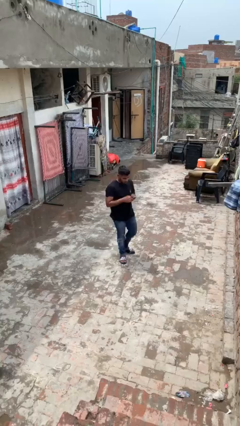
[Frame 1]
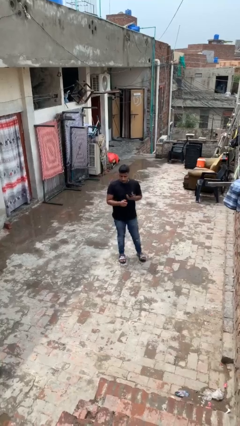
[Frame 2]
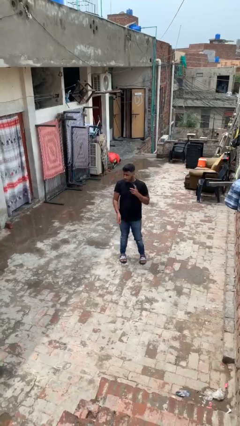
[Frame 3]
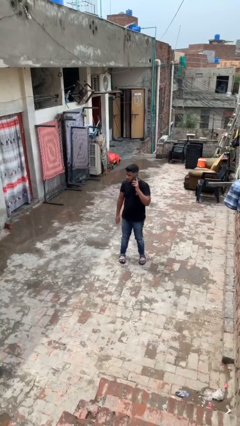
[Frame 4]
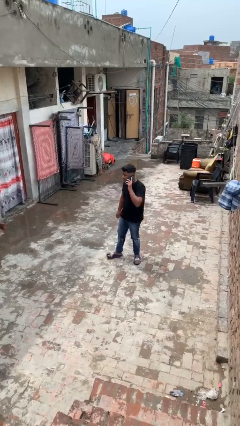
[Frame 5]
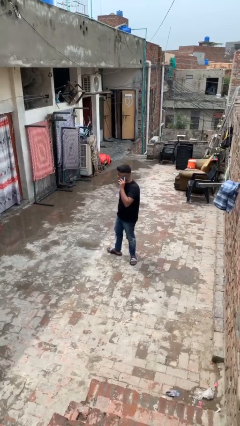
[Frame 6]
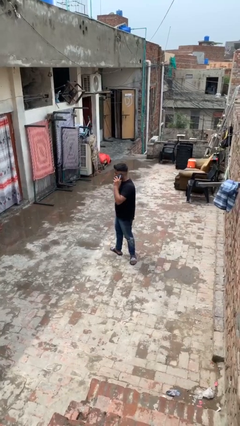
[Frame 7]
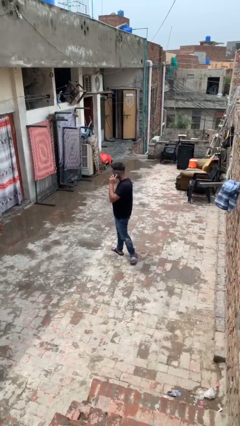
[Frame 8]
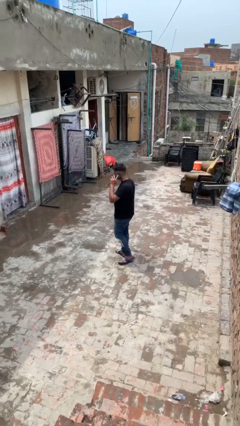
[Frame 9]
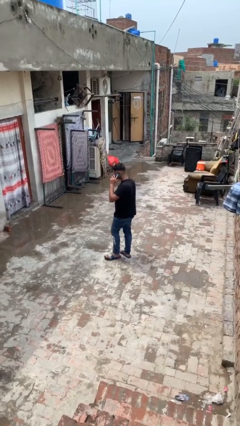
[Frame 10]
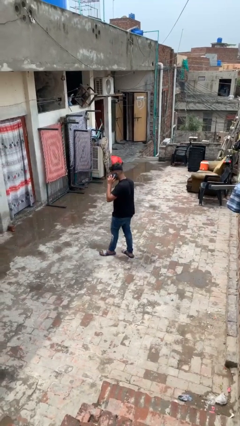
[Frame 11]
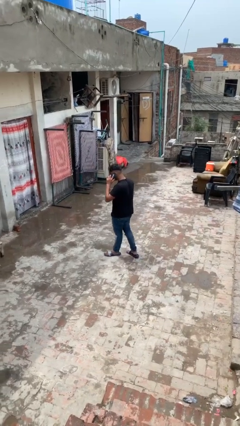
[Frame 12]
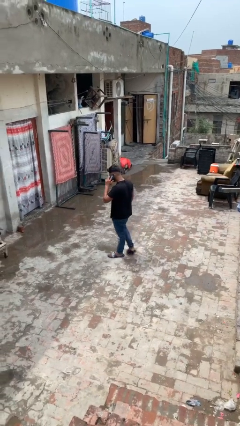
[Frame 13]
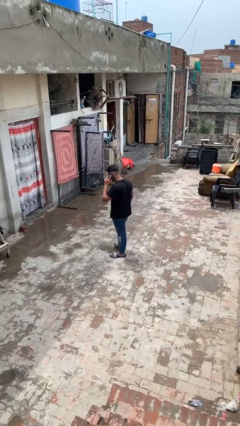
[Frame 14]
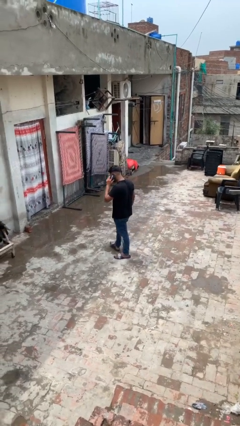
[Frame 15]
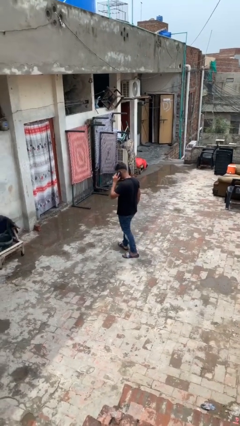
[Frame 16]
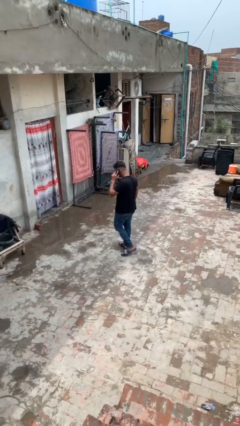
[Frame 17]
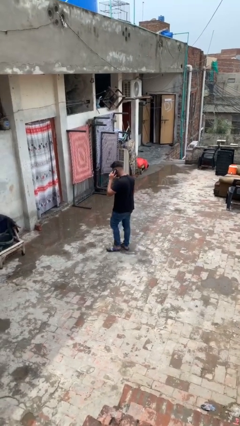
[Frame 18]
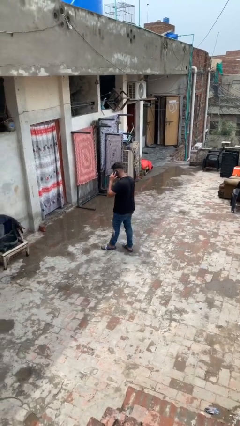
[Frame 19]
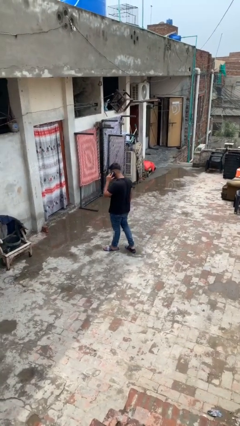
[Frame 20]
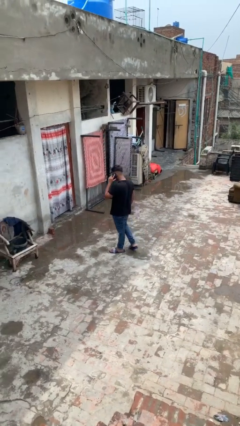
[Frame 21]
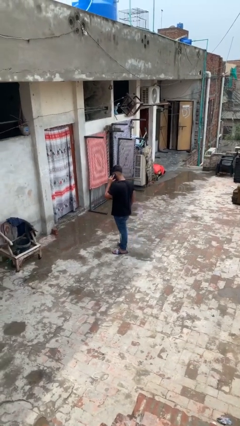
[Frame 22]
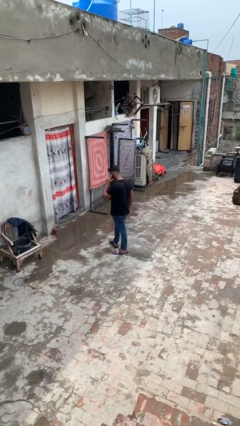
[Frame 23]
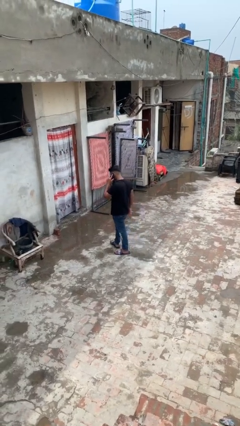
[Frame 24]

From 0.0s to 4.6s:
person talks on phone

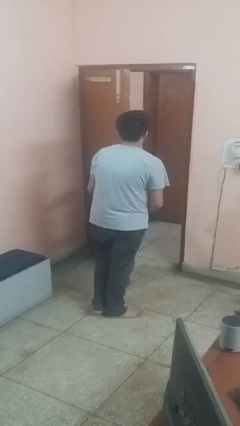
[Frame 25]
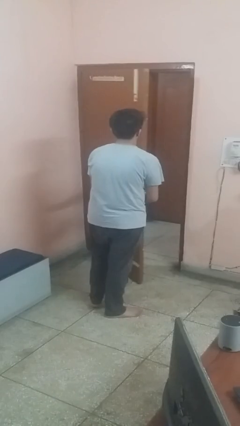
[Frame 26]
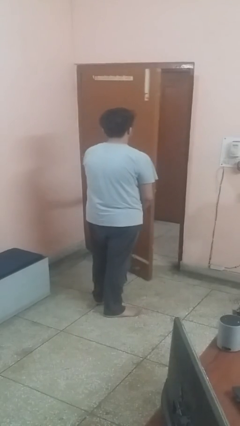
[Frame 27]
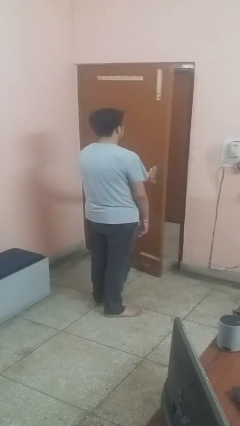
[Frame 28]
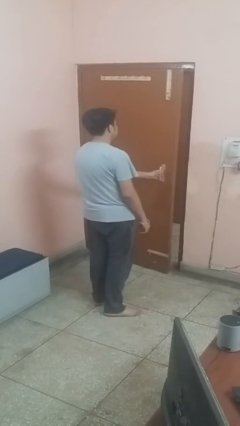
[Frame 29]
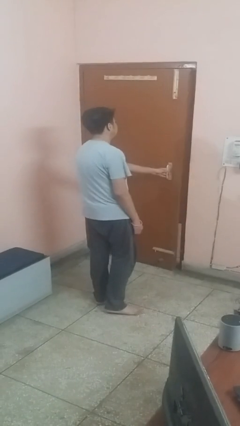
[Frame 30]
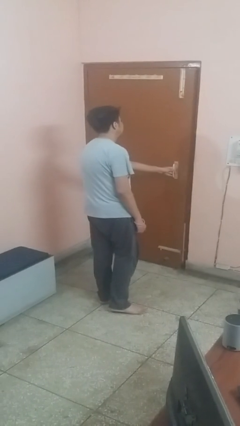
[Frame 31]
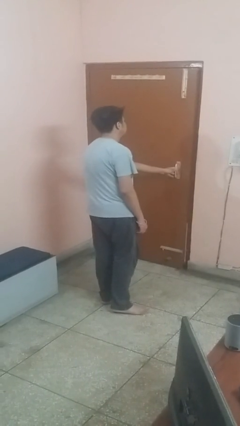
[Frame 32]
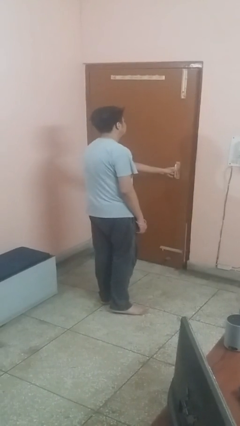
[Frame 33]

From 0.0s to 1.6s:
person closes facility door

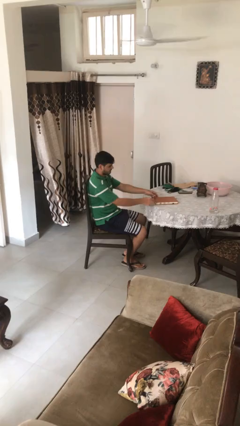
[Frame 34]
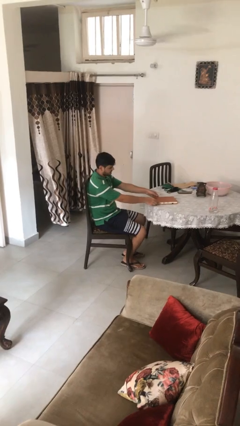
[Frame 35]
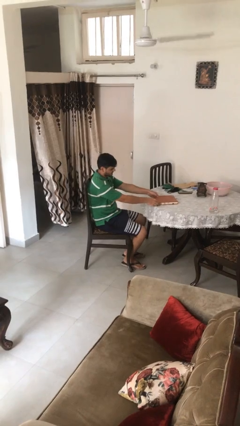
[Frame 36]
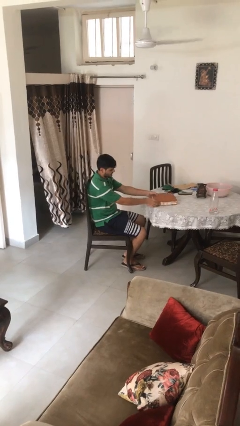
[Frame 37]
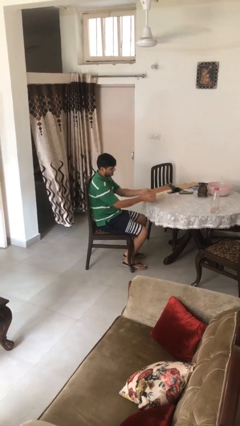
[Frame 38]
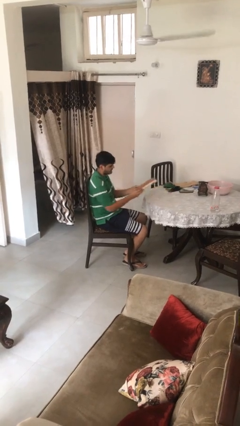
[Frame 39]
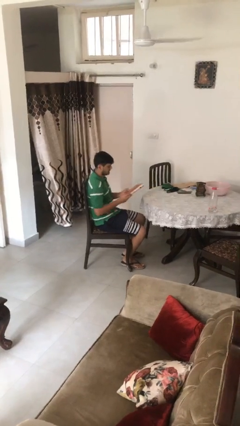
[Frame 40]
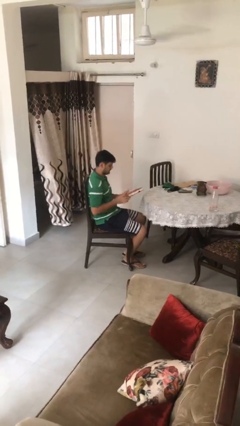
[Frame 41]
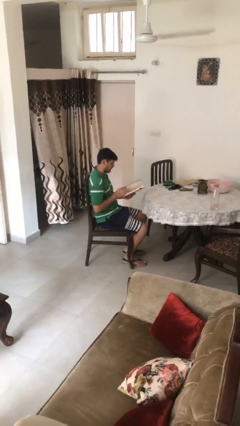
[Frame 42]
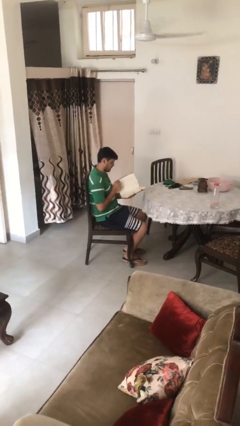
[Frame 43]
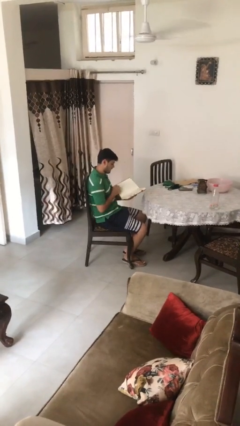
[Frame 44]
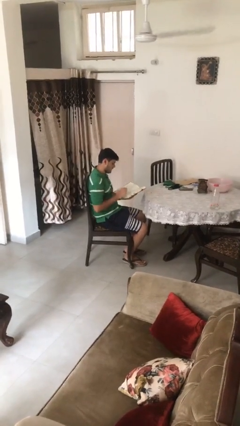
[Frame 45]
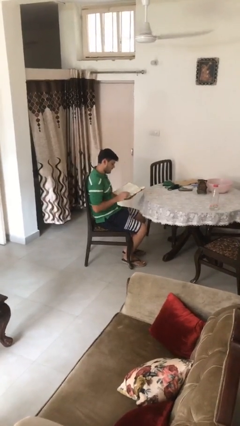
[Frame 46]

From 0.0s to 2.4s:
person picks up object from table

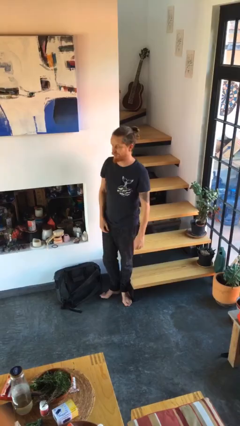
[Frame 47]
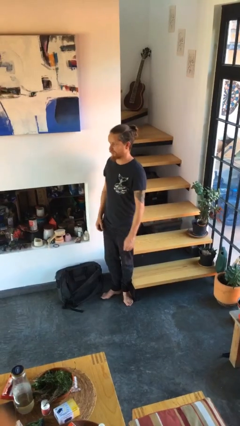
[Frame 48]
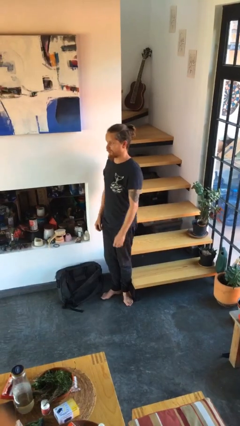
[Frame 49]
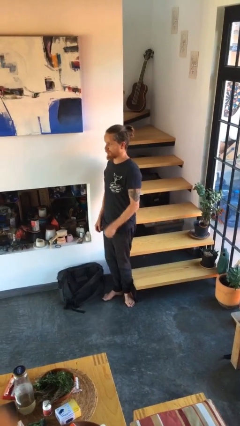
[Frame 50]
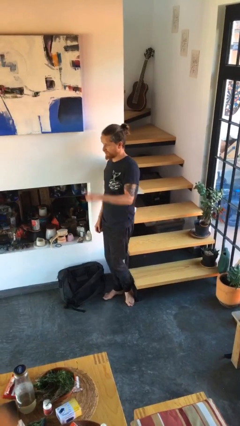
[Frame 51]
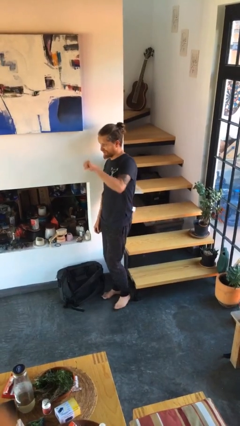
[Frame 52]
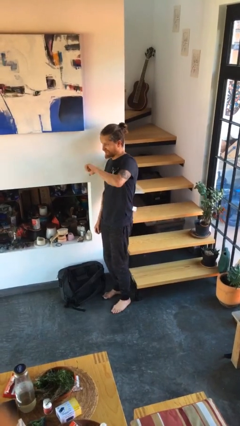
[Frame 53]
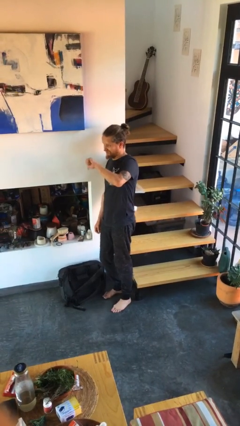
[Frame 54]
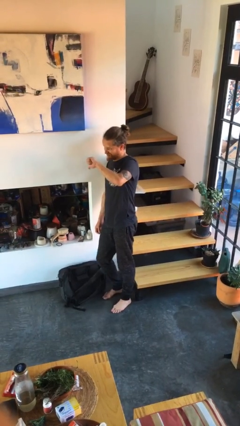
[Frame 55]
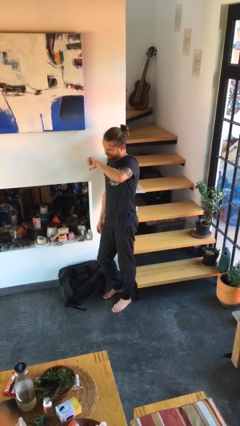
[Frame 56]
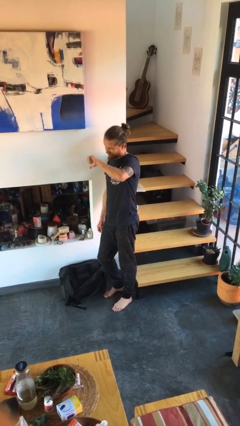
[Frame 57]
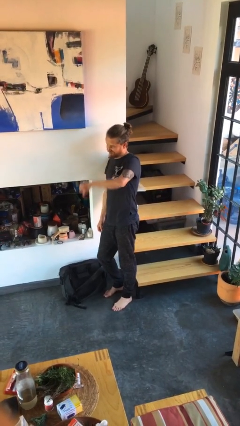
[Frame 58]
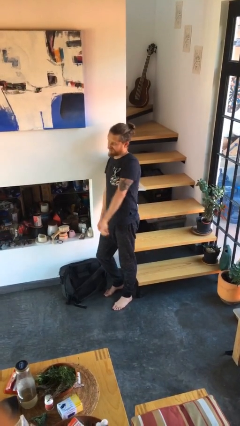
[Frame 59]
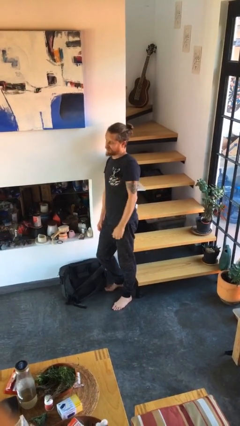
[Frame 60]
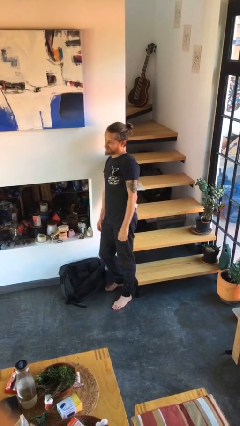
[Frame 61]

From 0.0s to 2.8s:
person gestures thumbs down

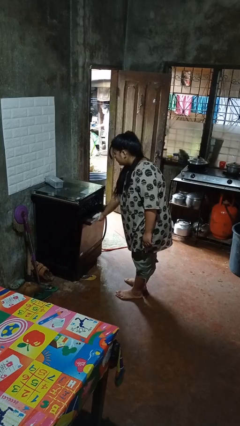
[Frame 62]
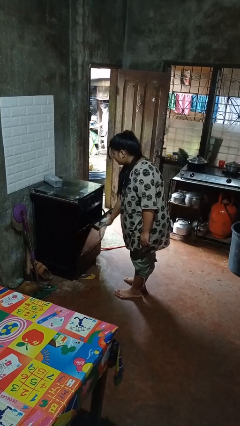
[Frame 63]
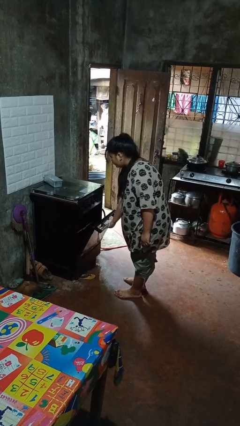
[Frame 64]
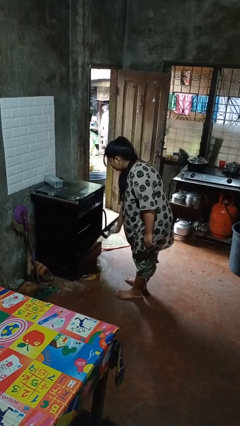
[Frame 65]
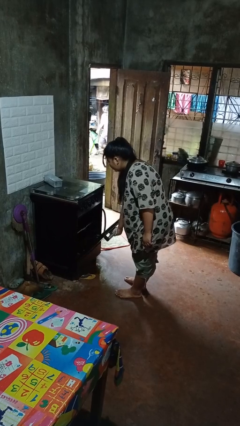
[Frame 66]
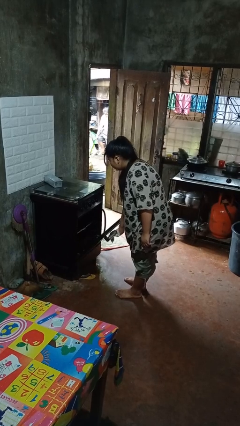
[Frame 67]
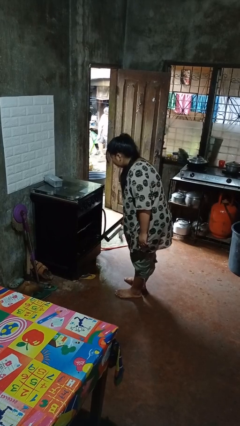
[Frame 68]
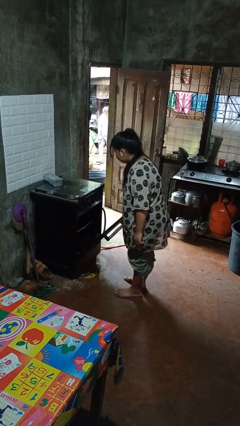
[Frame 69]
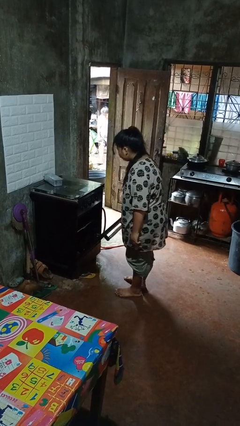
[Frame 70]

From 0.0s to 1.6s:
person opens oven door

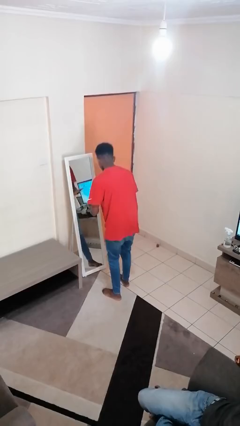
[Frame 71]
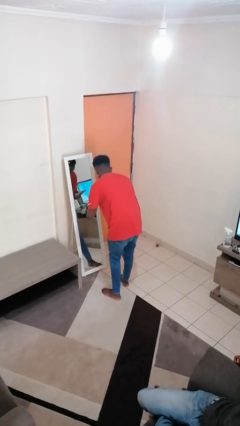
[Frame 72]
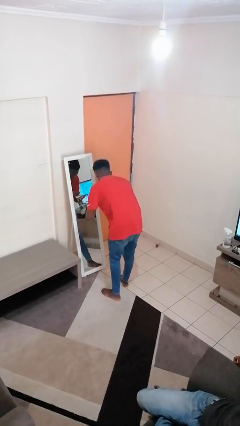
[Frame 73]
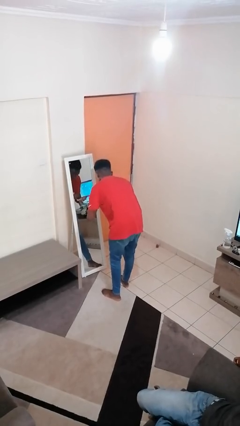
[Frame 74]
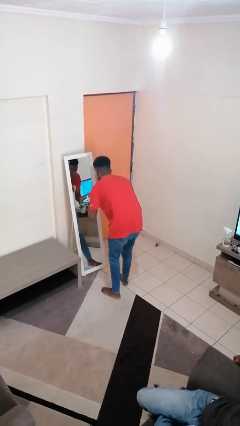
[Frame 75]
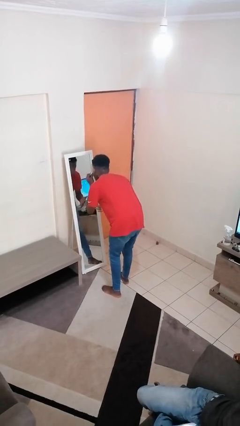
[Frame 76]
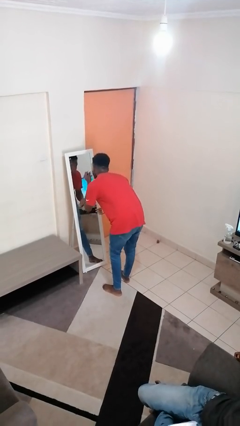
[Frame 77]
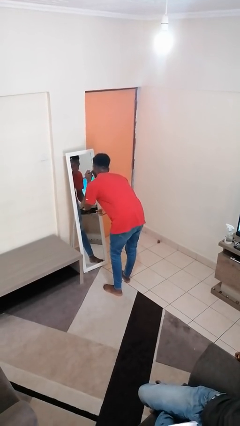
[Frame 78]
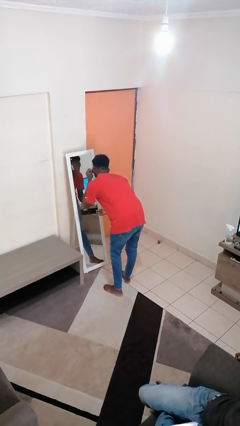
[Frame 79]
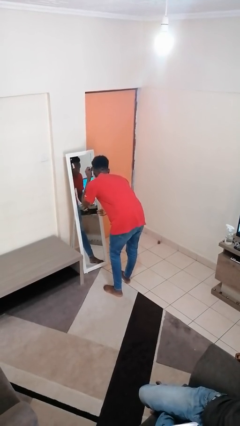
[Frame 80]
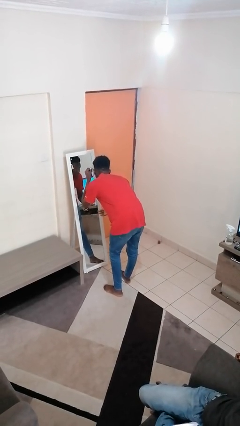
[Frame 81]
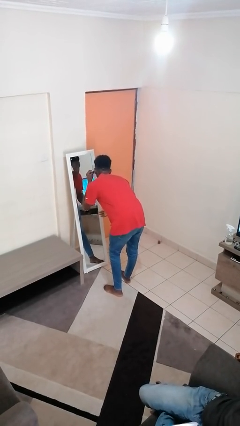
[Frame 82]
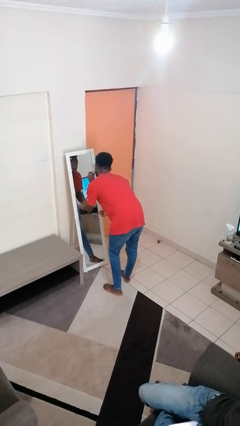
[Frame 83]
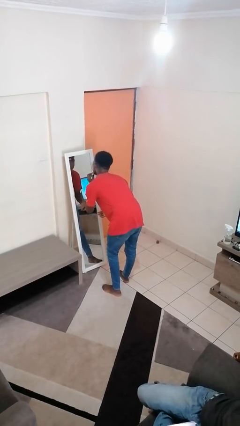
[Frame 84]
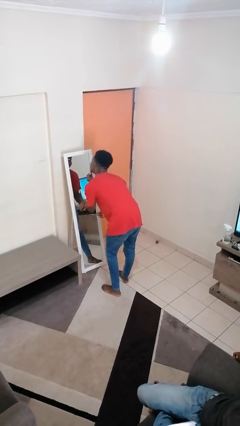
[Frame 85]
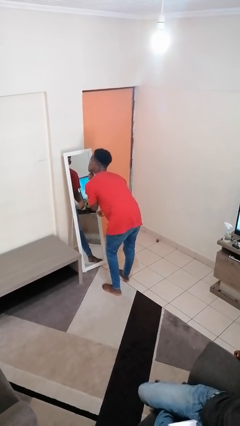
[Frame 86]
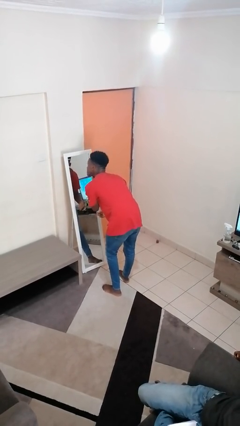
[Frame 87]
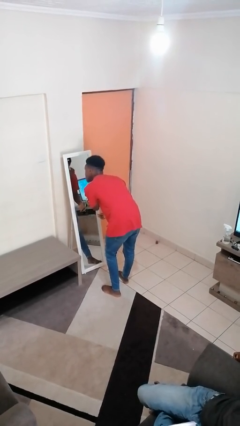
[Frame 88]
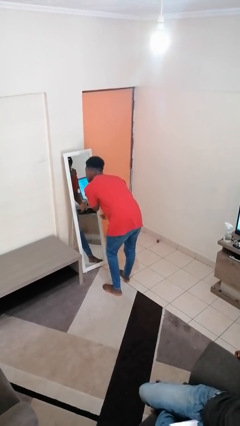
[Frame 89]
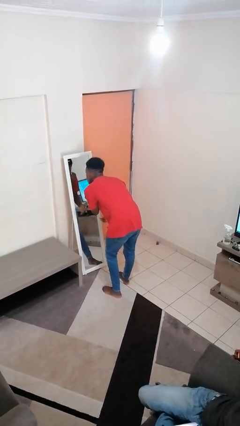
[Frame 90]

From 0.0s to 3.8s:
person applies foundation makeup

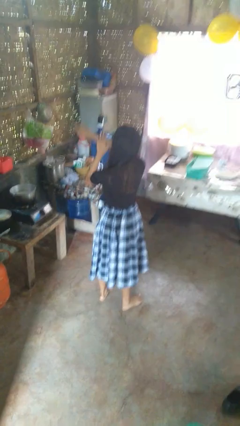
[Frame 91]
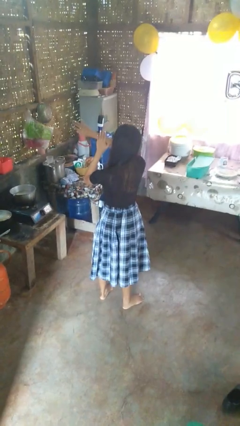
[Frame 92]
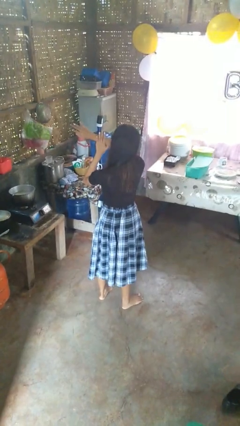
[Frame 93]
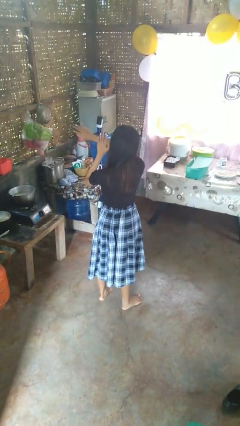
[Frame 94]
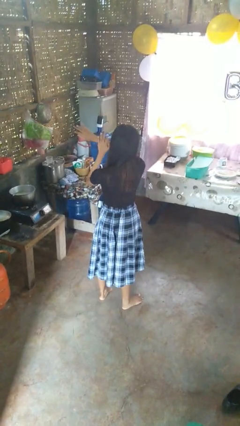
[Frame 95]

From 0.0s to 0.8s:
person swats bug
